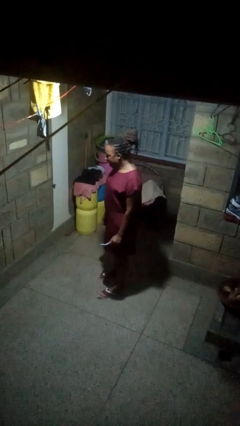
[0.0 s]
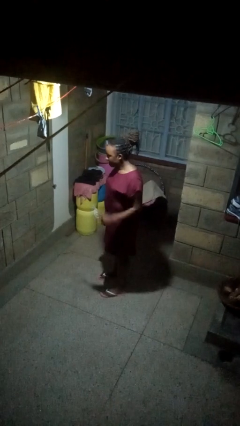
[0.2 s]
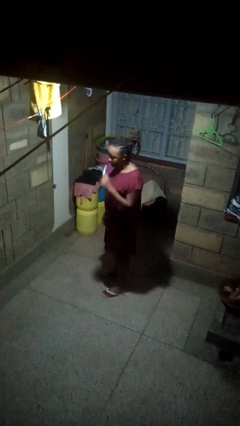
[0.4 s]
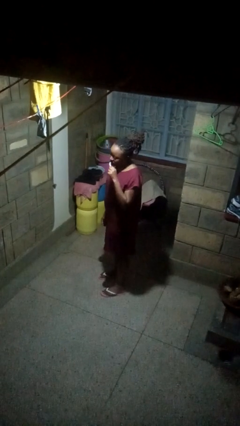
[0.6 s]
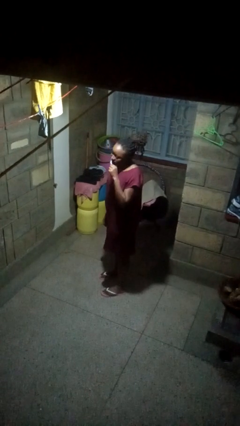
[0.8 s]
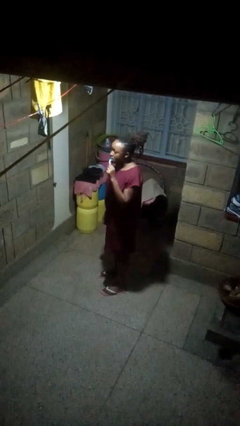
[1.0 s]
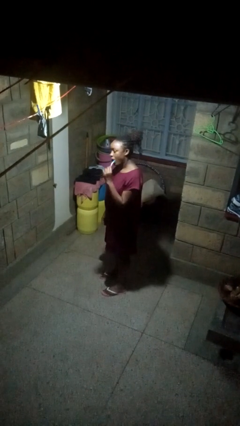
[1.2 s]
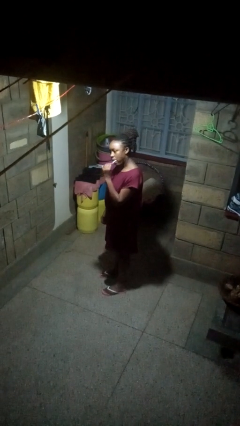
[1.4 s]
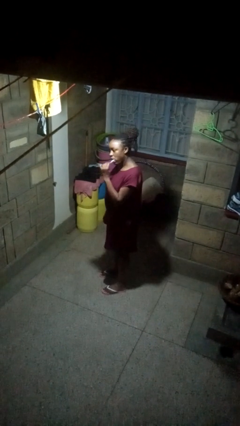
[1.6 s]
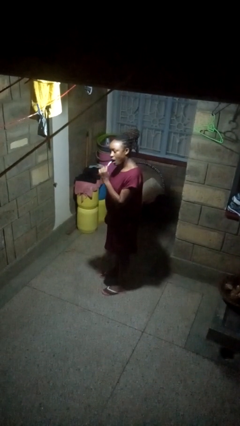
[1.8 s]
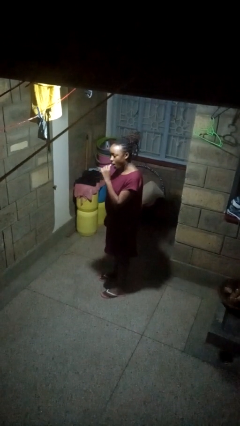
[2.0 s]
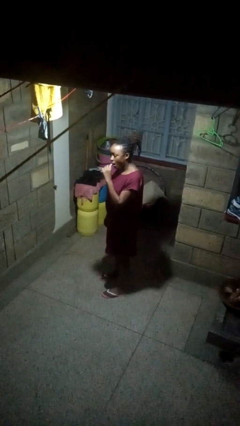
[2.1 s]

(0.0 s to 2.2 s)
person brushes teeth

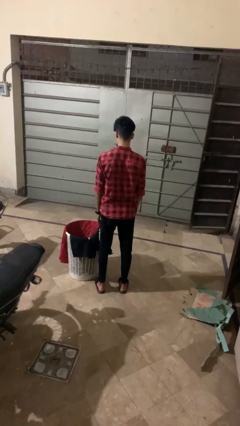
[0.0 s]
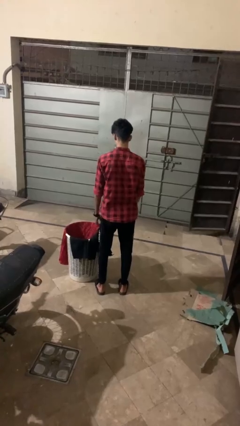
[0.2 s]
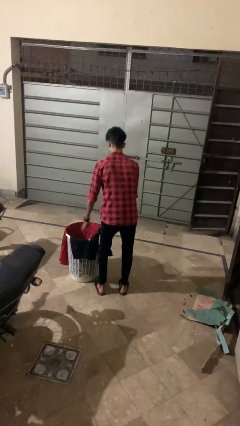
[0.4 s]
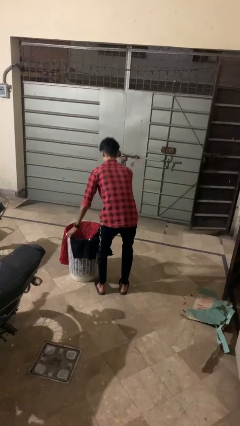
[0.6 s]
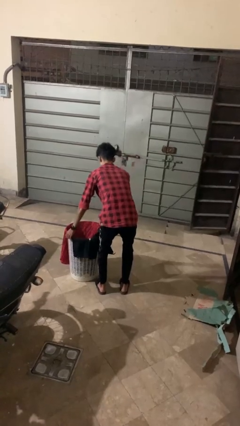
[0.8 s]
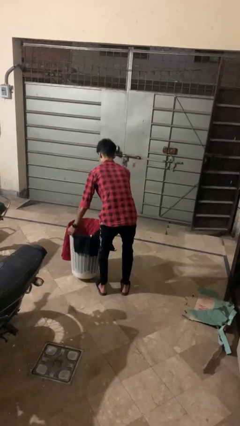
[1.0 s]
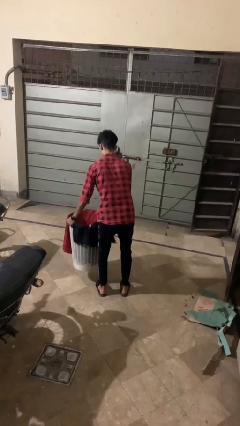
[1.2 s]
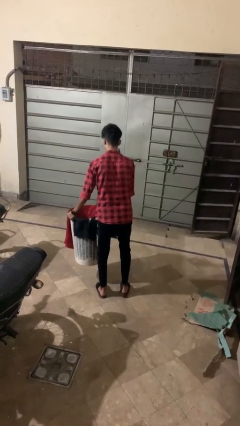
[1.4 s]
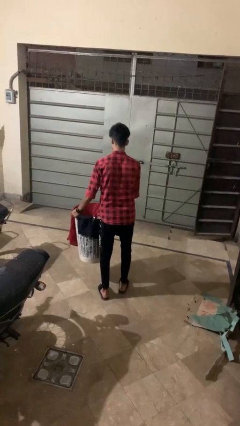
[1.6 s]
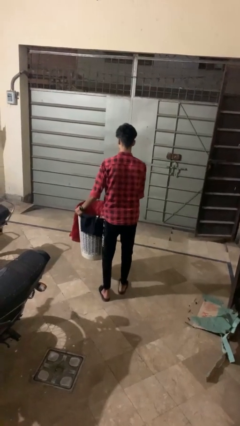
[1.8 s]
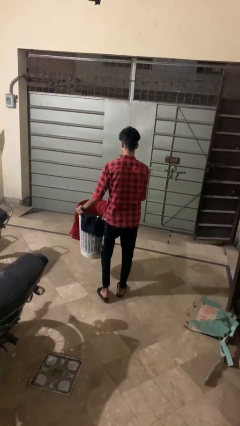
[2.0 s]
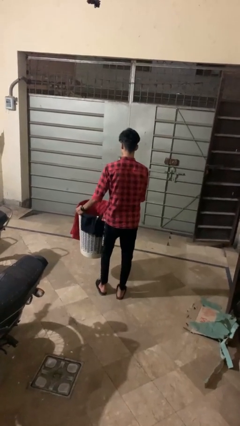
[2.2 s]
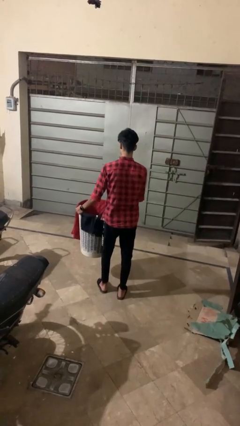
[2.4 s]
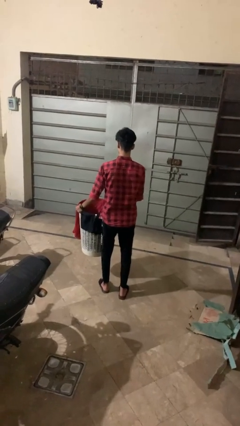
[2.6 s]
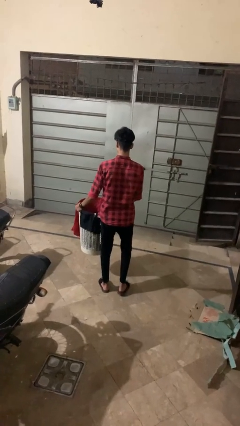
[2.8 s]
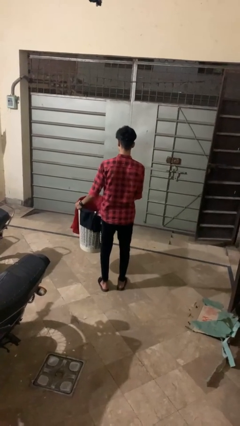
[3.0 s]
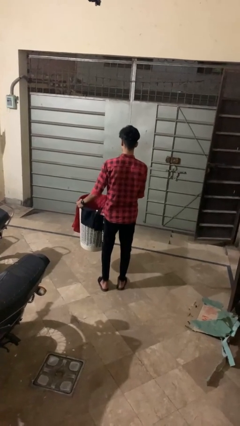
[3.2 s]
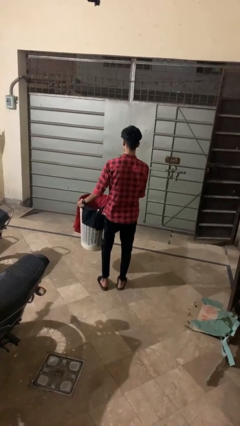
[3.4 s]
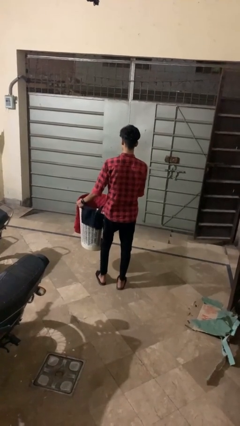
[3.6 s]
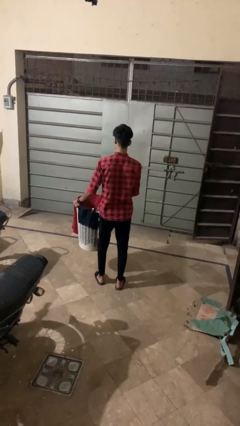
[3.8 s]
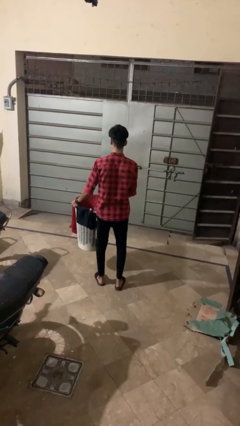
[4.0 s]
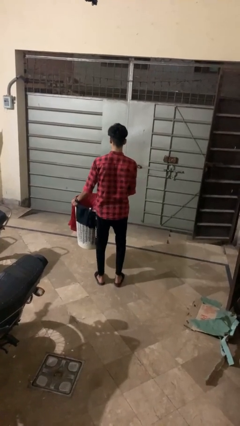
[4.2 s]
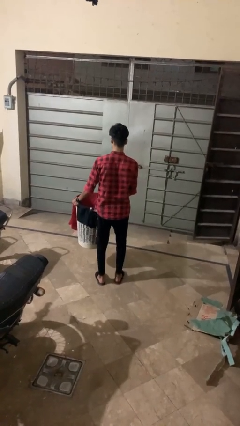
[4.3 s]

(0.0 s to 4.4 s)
person carries laundry basket

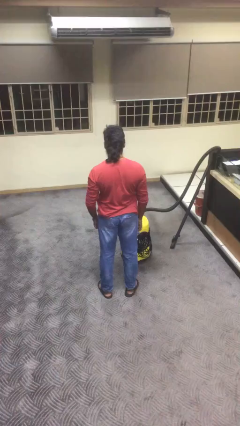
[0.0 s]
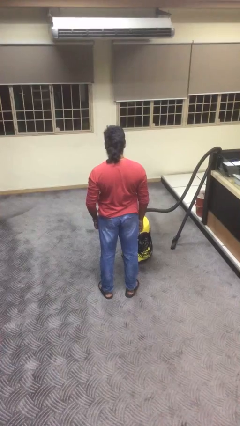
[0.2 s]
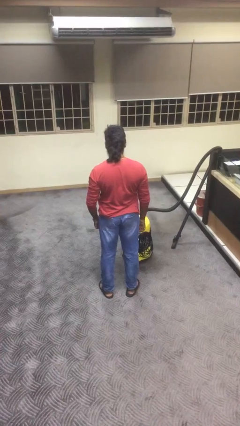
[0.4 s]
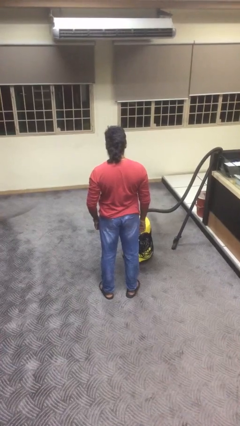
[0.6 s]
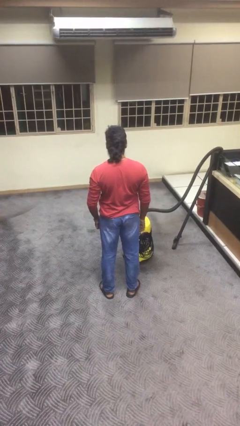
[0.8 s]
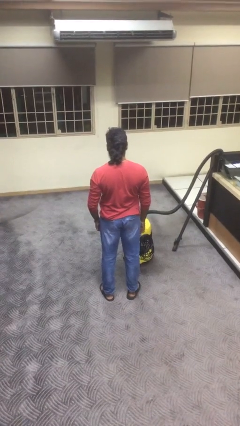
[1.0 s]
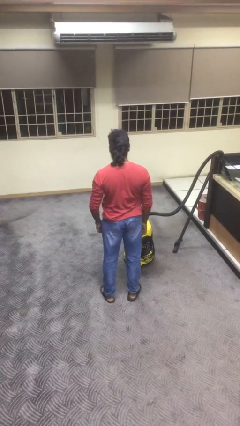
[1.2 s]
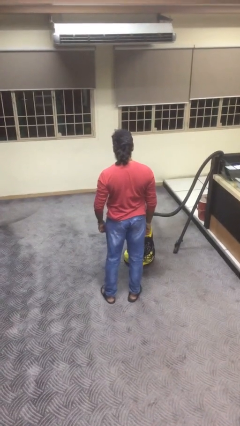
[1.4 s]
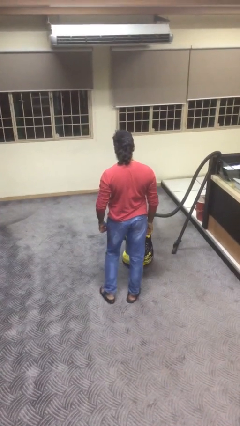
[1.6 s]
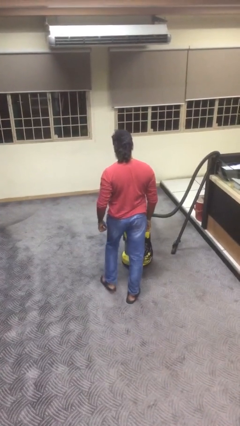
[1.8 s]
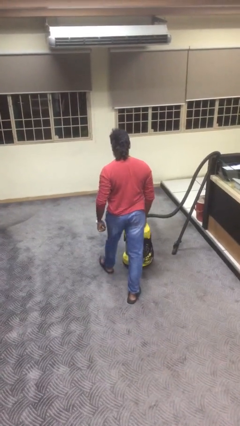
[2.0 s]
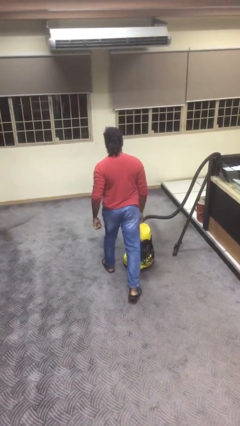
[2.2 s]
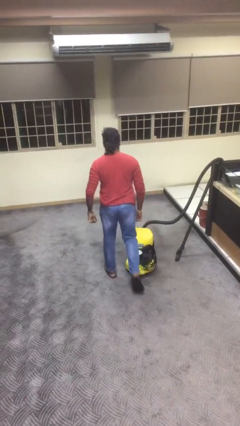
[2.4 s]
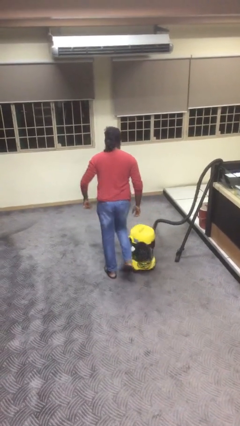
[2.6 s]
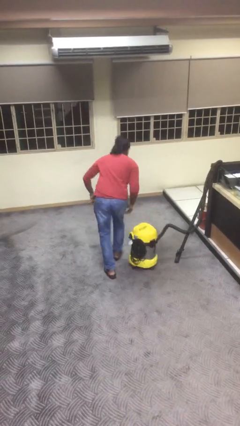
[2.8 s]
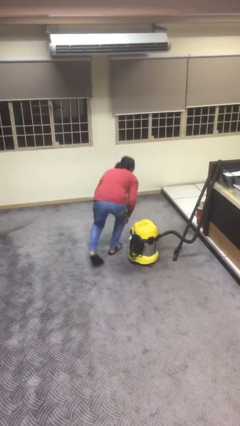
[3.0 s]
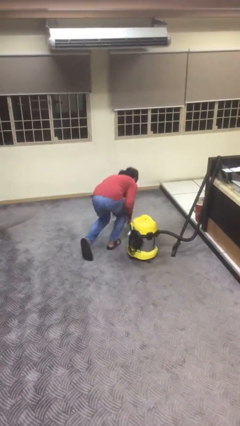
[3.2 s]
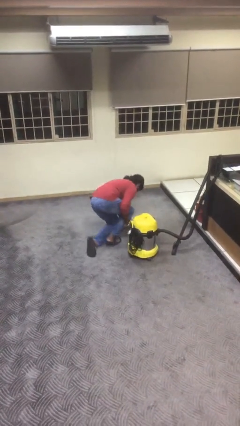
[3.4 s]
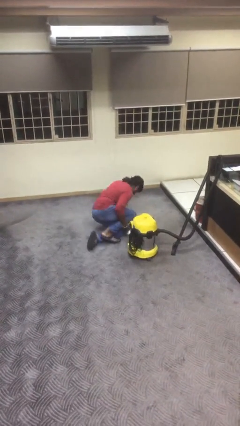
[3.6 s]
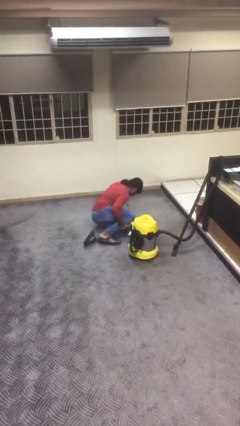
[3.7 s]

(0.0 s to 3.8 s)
person trips on object on floor

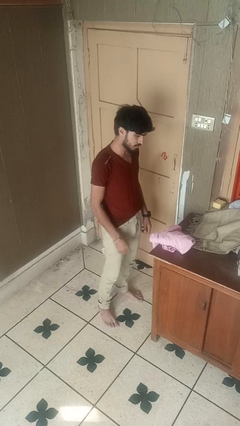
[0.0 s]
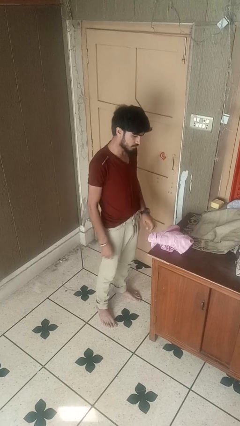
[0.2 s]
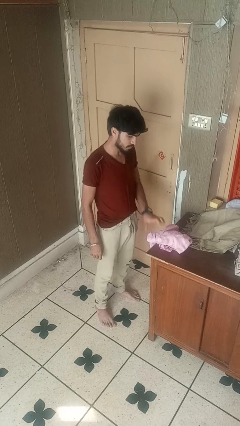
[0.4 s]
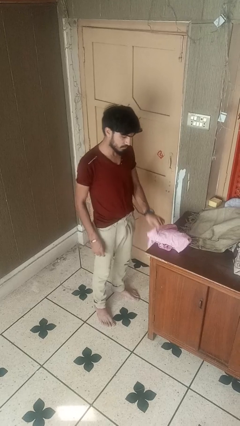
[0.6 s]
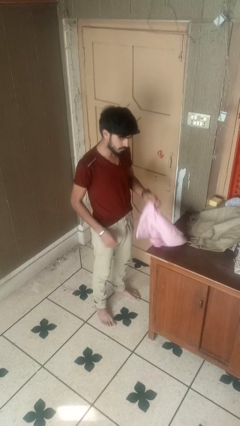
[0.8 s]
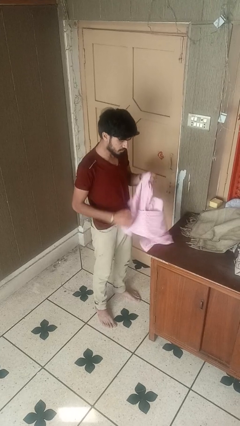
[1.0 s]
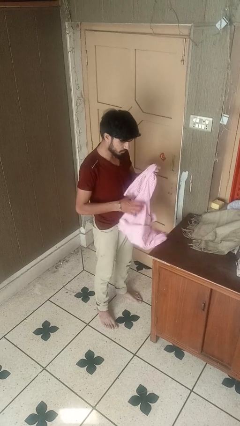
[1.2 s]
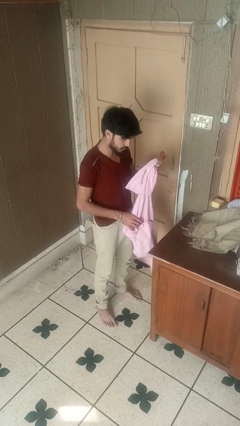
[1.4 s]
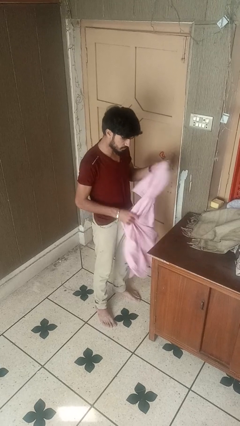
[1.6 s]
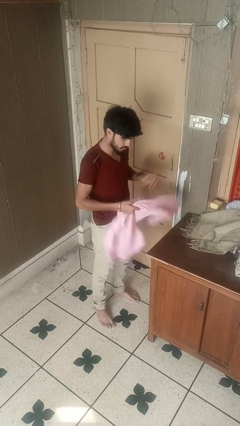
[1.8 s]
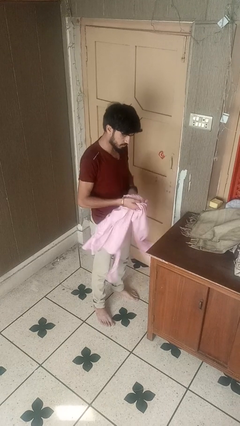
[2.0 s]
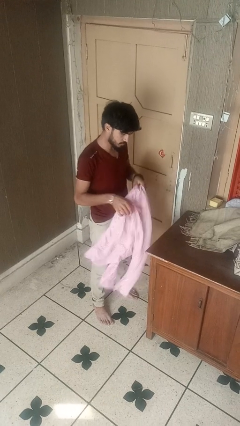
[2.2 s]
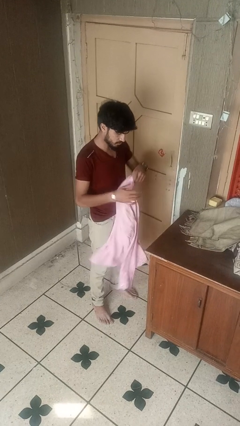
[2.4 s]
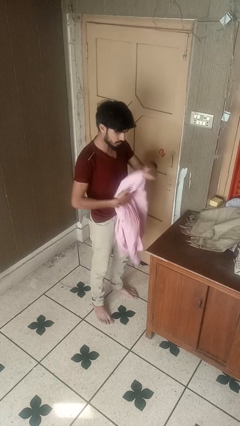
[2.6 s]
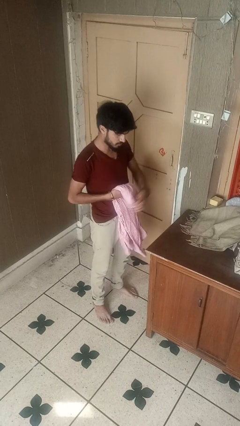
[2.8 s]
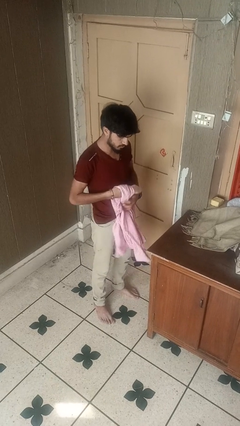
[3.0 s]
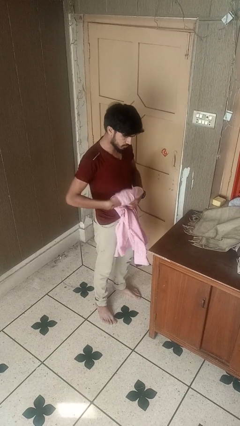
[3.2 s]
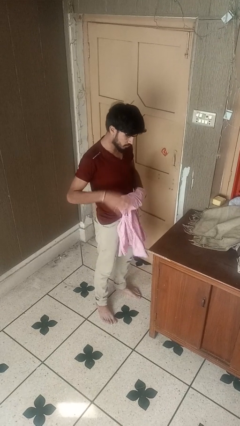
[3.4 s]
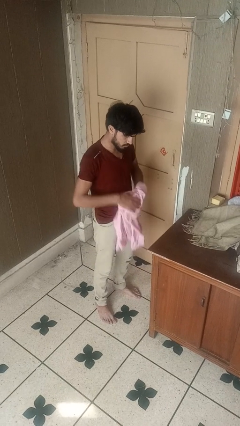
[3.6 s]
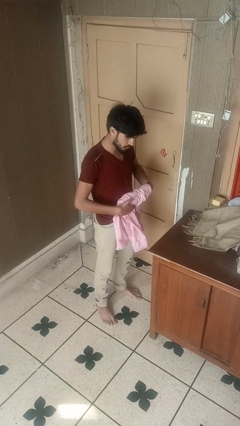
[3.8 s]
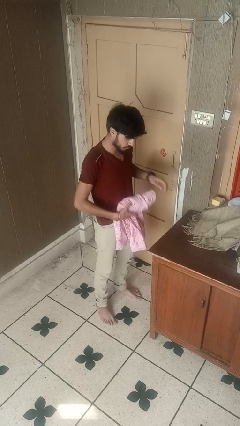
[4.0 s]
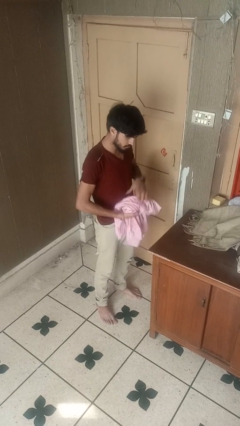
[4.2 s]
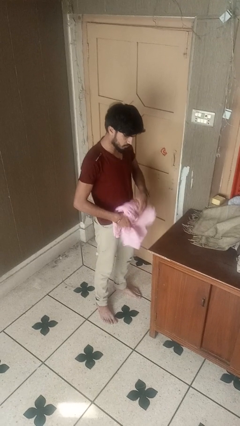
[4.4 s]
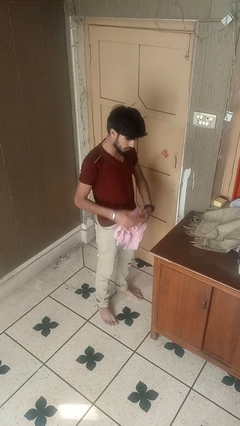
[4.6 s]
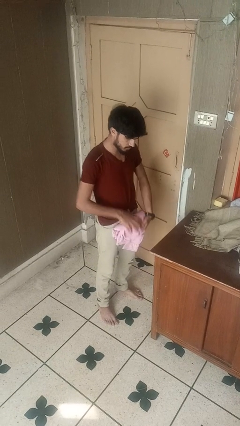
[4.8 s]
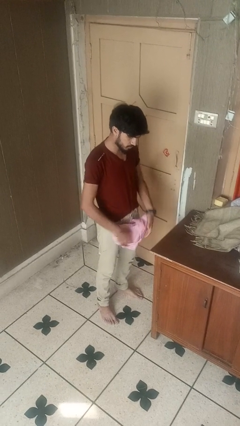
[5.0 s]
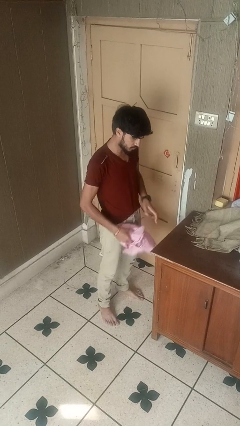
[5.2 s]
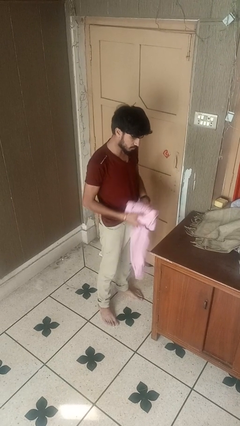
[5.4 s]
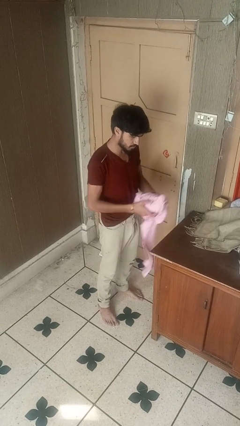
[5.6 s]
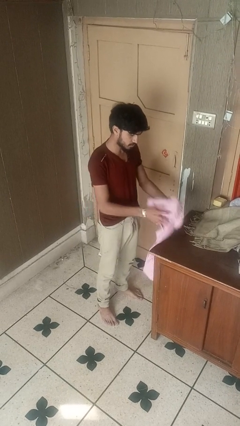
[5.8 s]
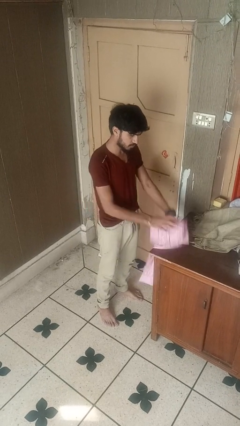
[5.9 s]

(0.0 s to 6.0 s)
person folds shirt

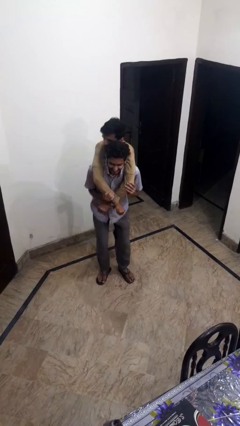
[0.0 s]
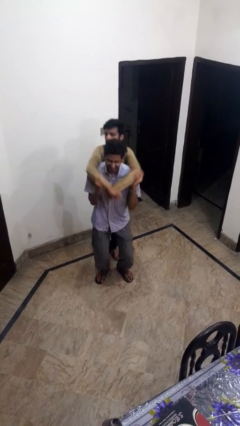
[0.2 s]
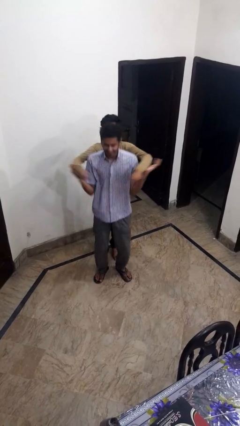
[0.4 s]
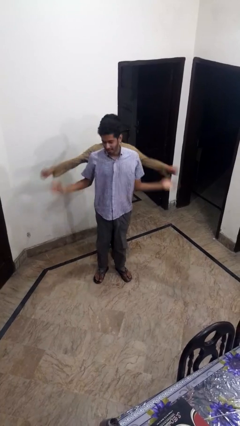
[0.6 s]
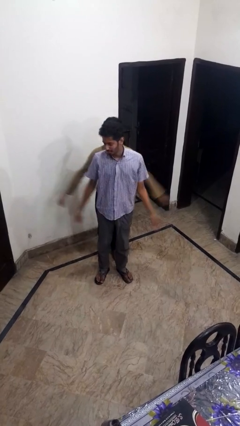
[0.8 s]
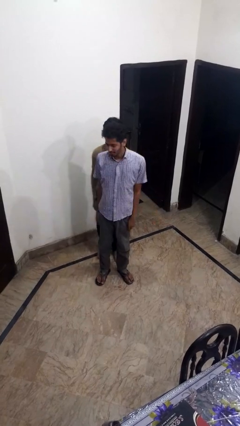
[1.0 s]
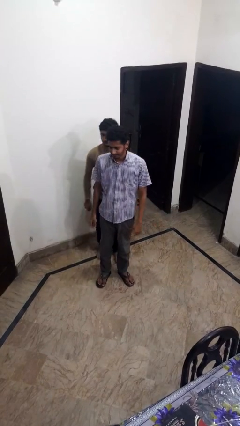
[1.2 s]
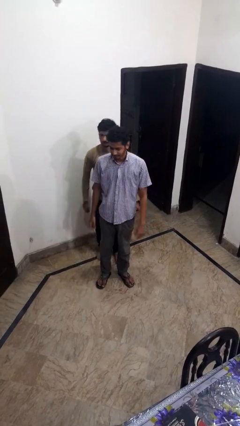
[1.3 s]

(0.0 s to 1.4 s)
person puts down person
